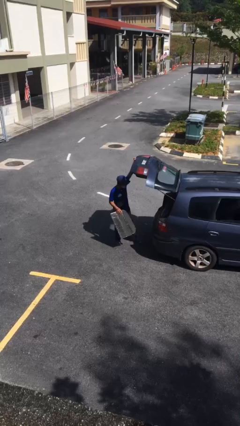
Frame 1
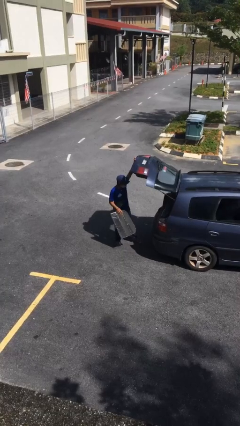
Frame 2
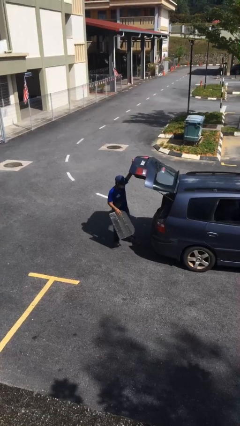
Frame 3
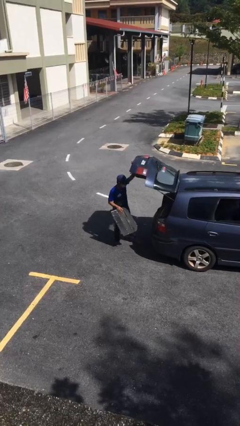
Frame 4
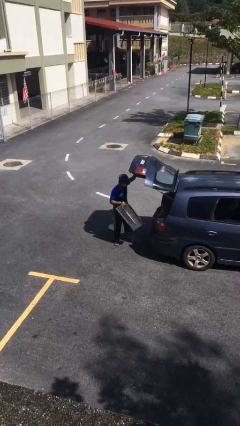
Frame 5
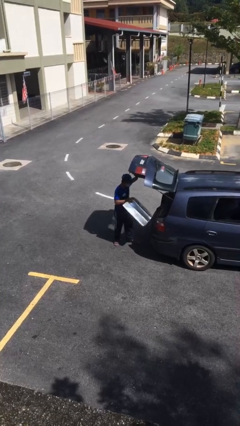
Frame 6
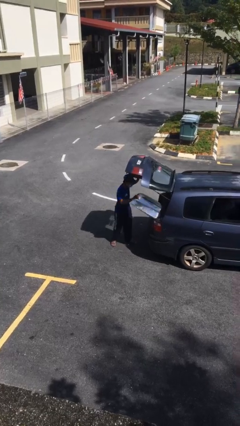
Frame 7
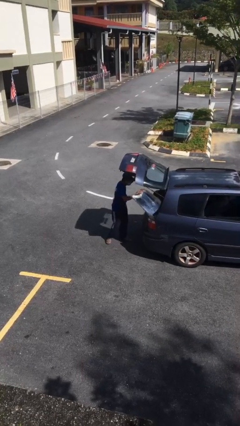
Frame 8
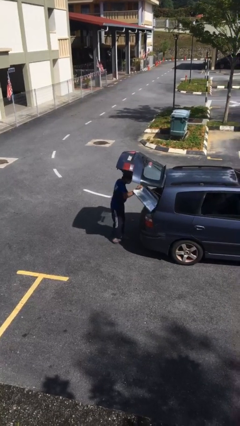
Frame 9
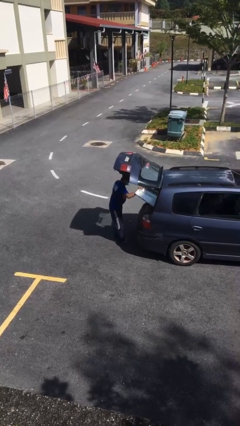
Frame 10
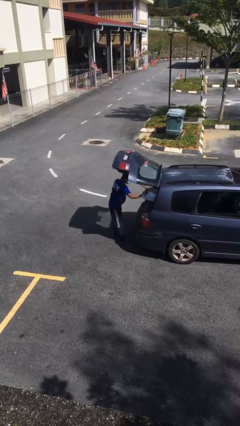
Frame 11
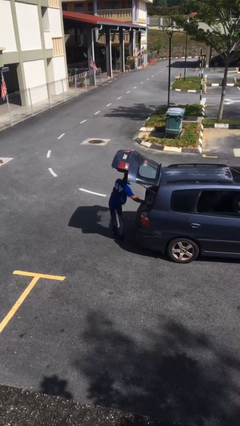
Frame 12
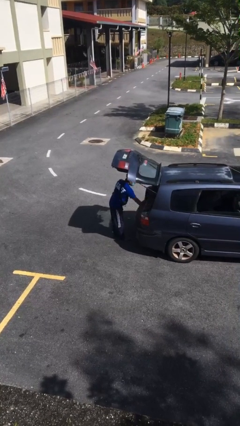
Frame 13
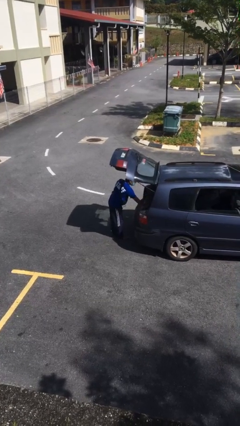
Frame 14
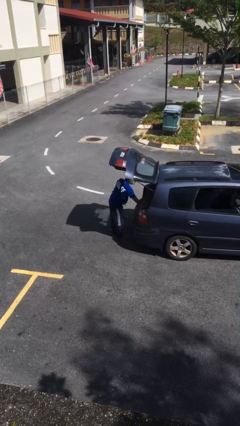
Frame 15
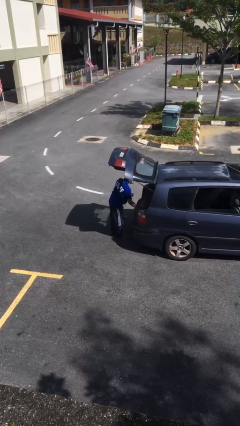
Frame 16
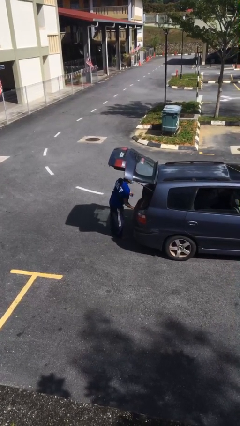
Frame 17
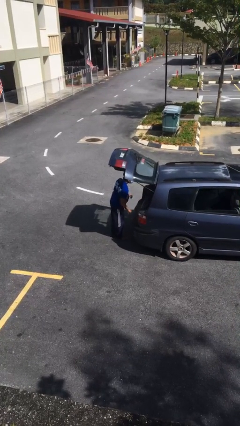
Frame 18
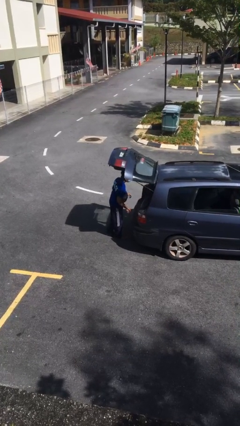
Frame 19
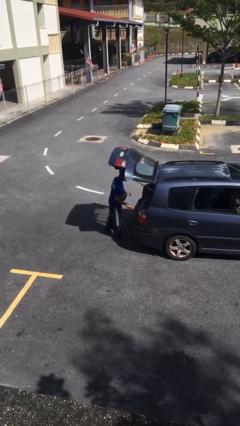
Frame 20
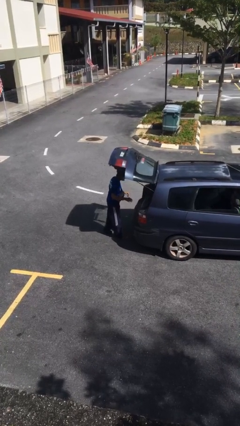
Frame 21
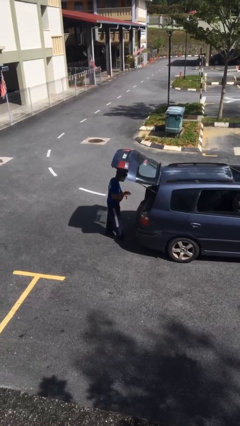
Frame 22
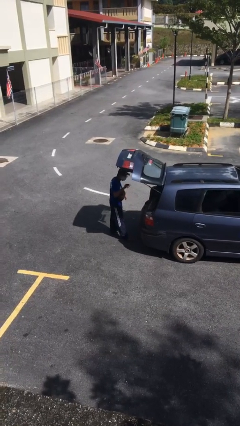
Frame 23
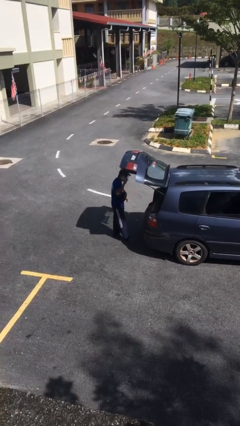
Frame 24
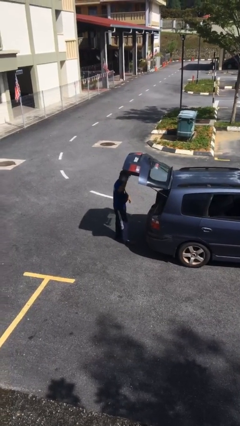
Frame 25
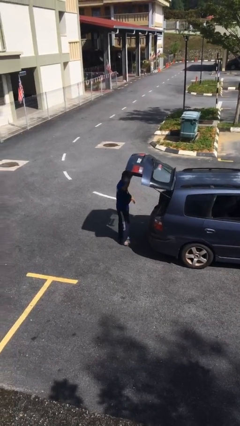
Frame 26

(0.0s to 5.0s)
person loads car

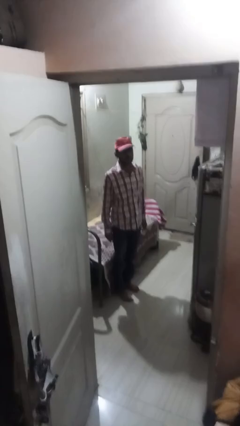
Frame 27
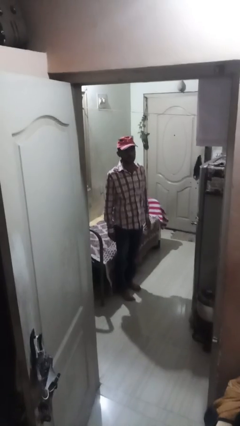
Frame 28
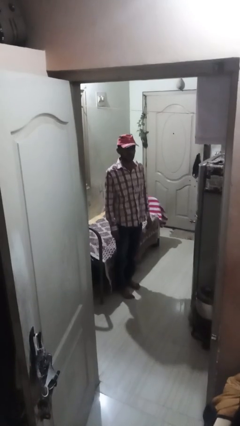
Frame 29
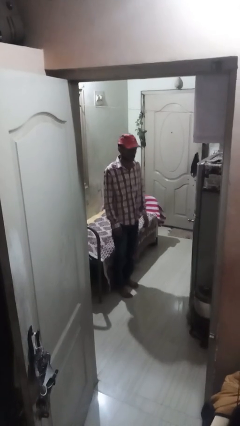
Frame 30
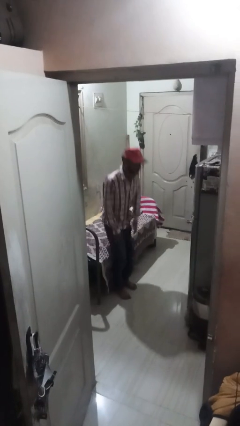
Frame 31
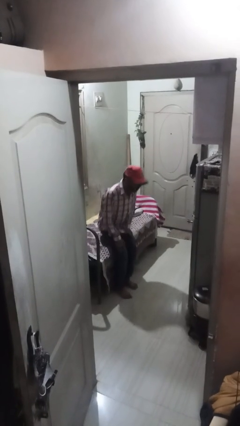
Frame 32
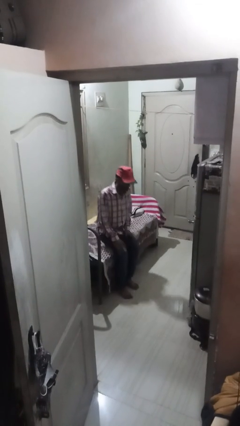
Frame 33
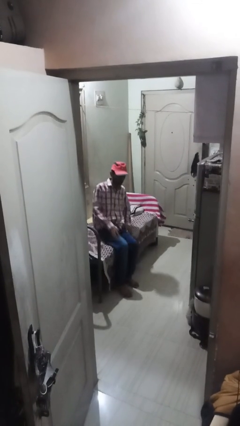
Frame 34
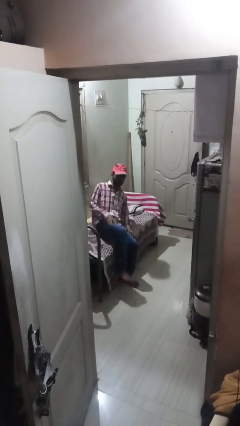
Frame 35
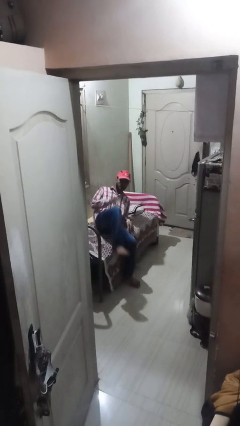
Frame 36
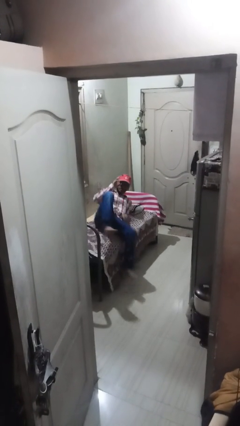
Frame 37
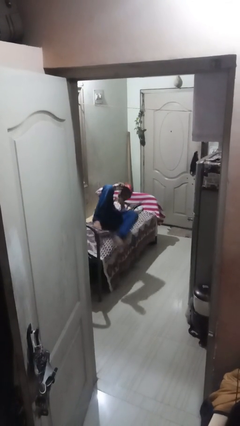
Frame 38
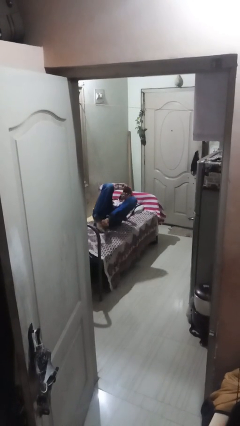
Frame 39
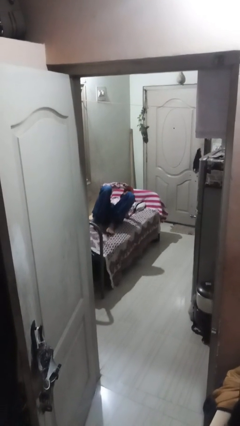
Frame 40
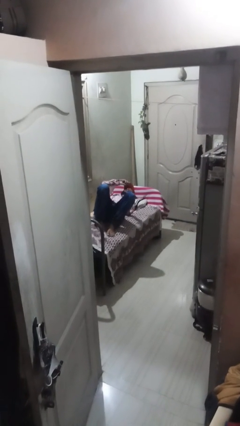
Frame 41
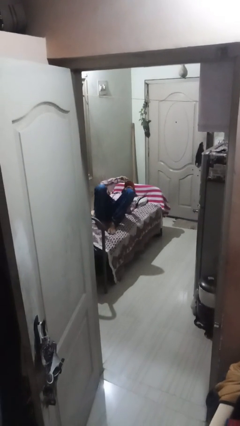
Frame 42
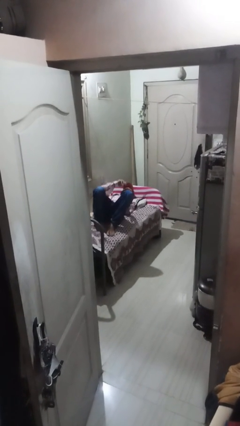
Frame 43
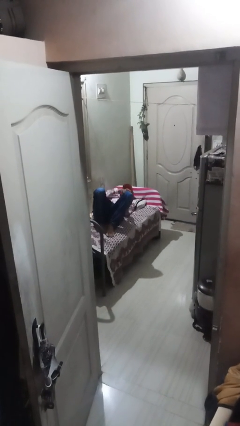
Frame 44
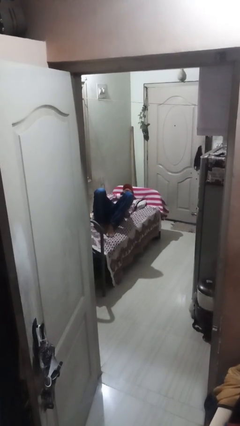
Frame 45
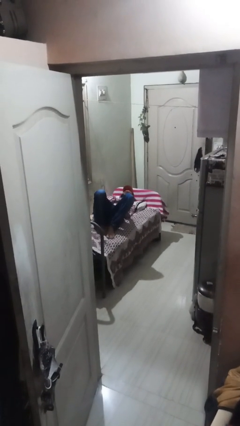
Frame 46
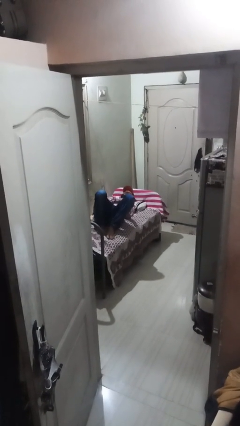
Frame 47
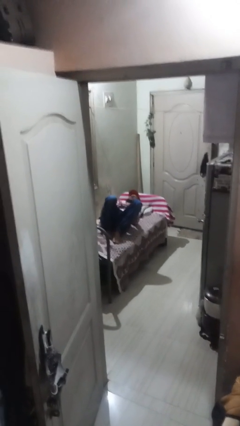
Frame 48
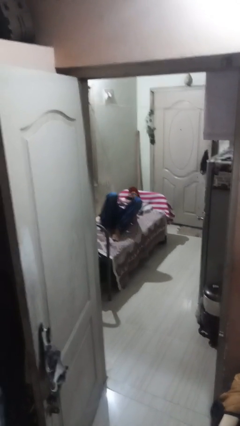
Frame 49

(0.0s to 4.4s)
person lies down on couch

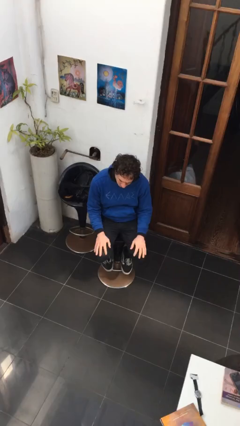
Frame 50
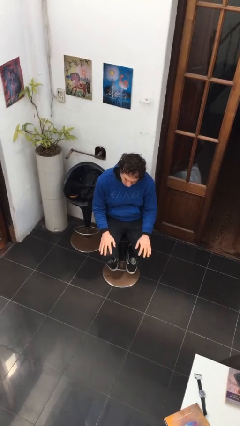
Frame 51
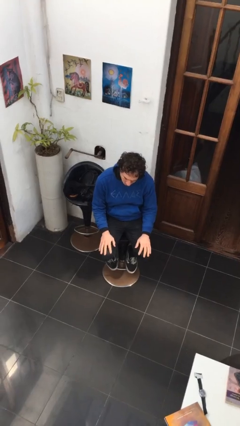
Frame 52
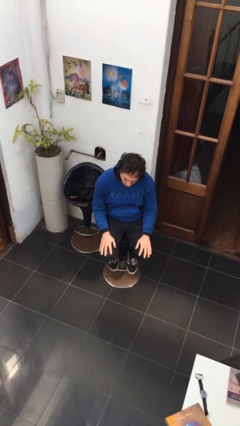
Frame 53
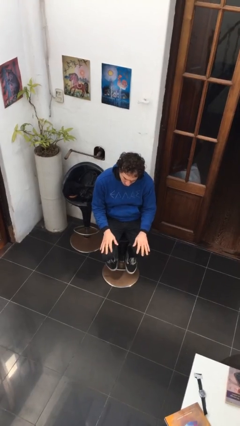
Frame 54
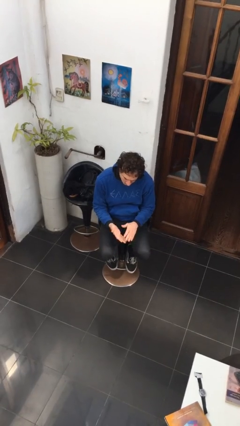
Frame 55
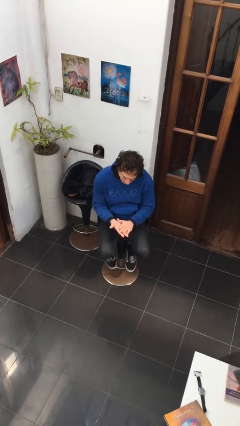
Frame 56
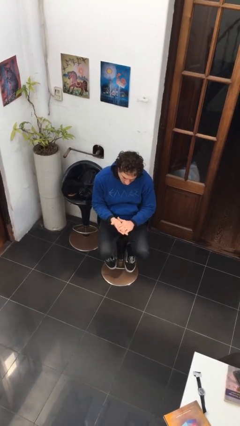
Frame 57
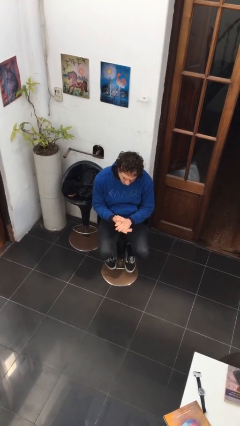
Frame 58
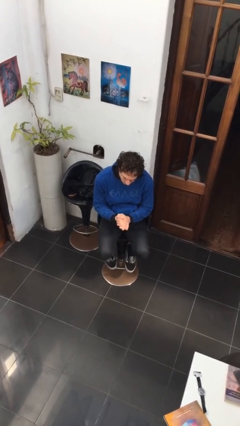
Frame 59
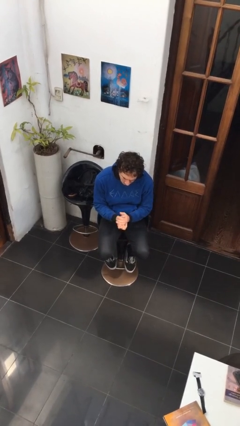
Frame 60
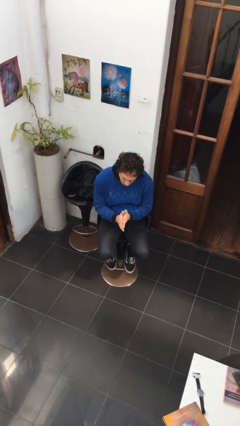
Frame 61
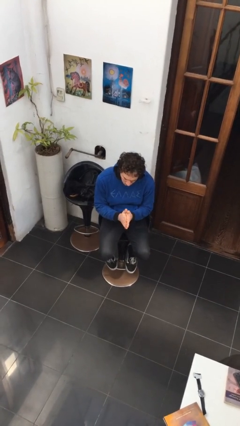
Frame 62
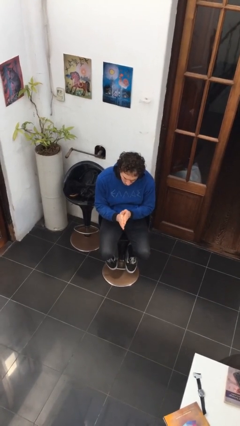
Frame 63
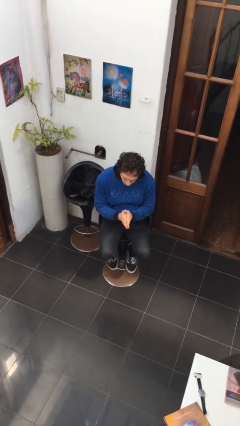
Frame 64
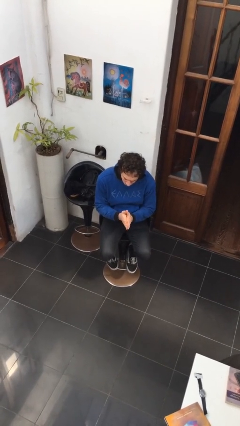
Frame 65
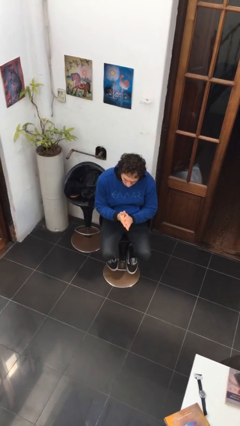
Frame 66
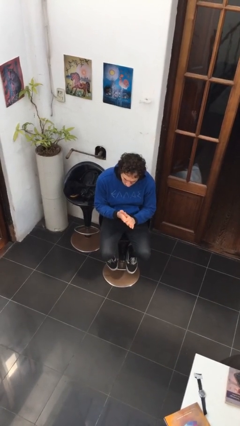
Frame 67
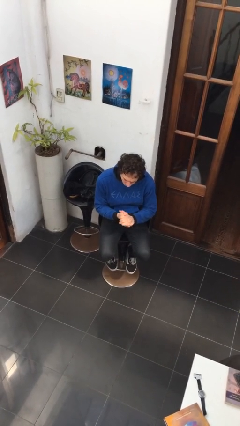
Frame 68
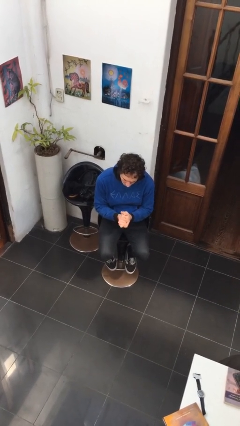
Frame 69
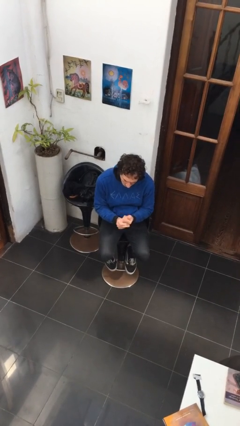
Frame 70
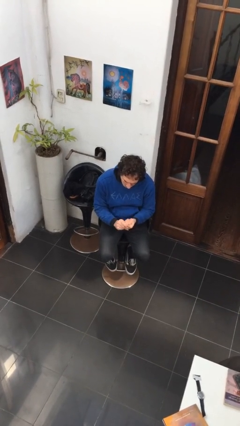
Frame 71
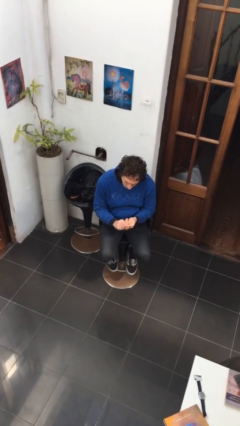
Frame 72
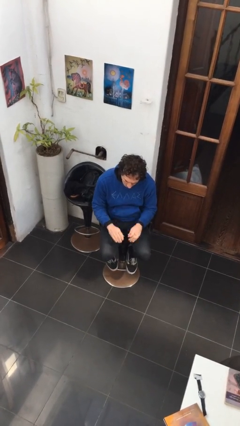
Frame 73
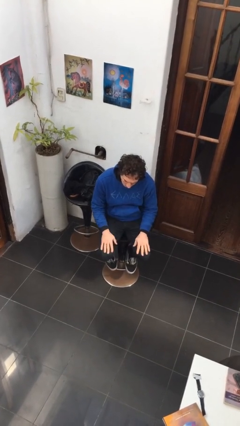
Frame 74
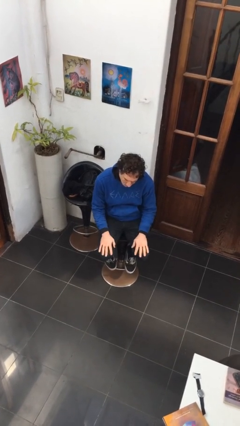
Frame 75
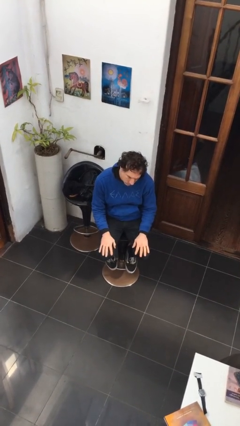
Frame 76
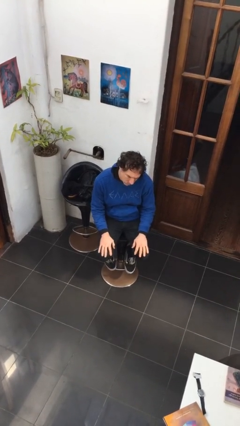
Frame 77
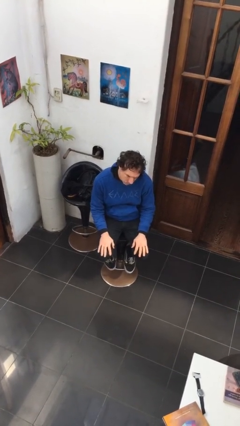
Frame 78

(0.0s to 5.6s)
person looks at hands in lap

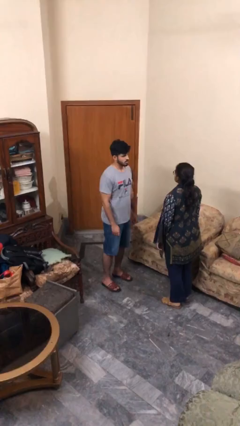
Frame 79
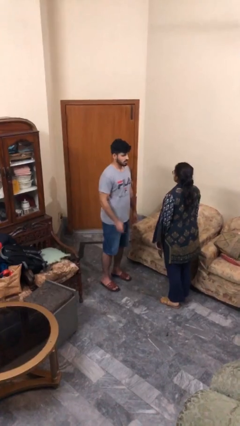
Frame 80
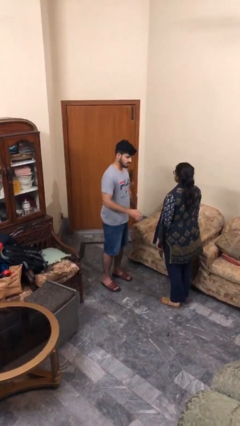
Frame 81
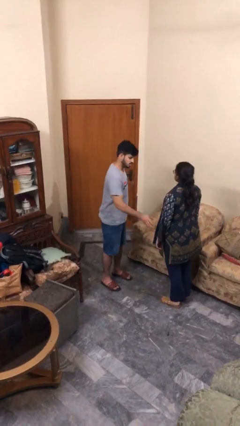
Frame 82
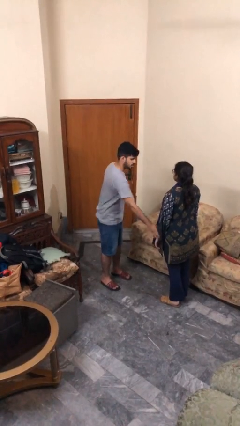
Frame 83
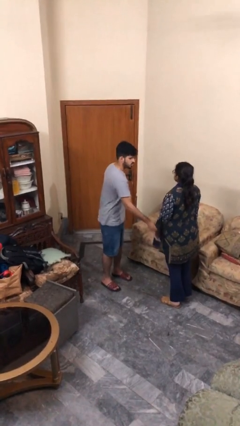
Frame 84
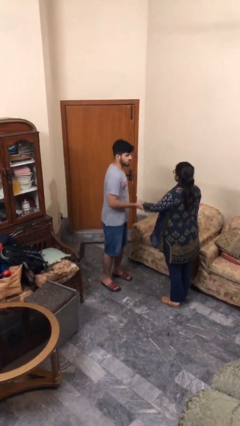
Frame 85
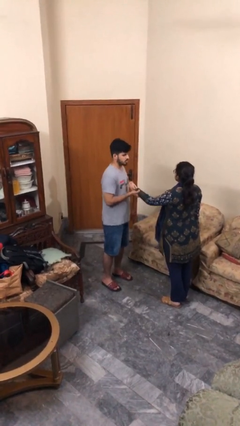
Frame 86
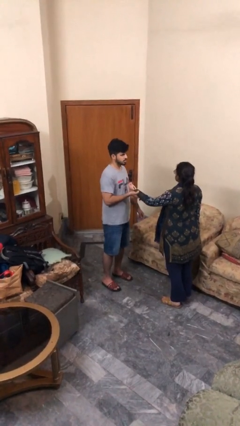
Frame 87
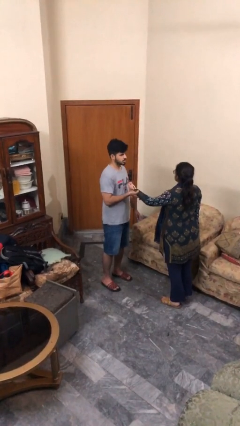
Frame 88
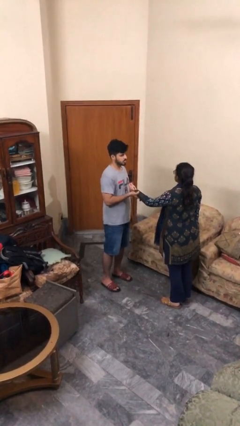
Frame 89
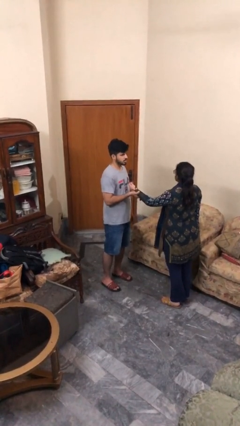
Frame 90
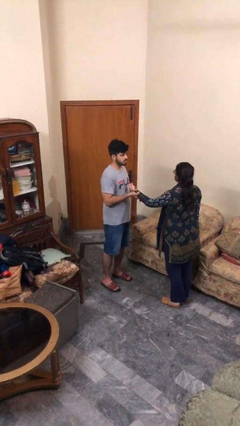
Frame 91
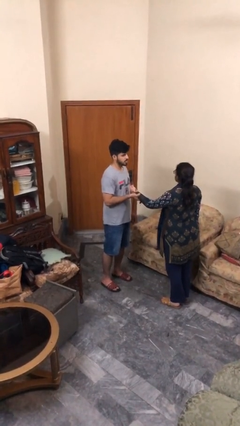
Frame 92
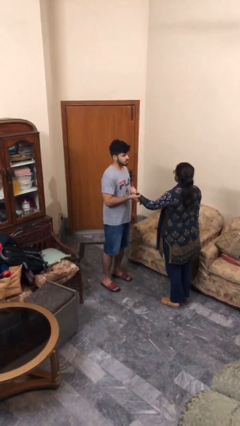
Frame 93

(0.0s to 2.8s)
person grabs person by forearm
